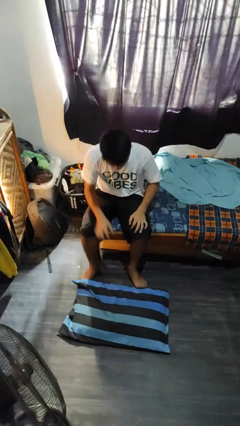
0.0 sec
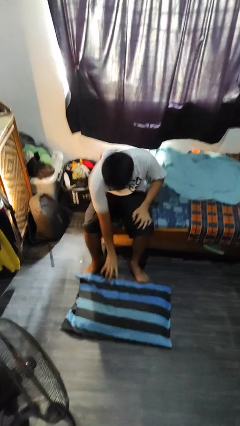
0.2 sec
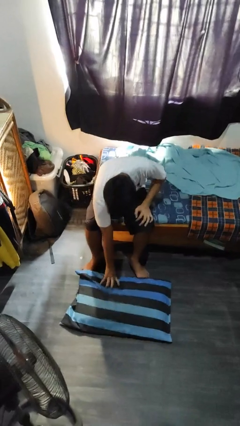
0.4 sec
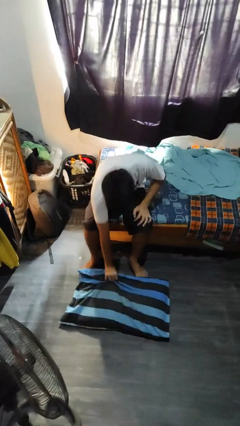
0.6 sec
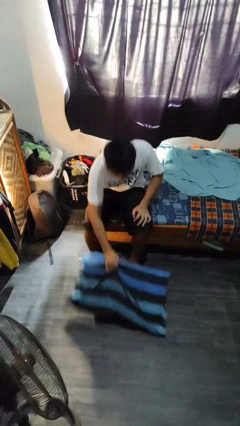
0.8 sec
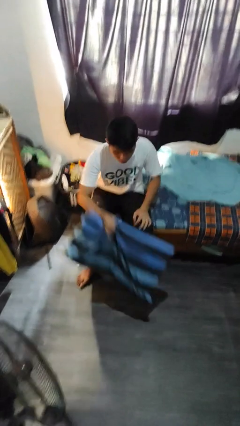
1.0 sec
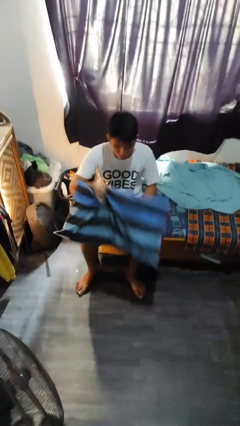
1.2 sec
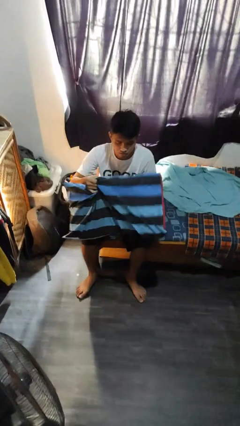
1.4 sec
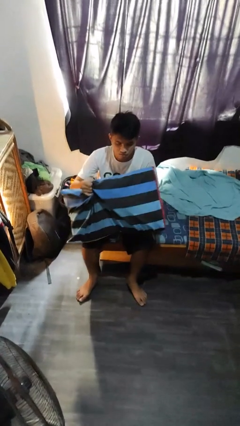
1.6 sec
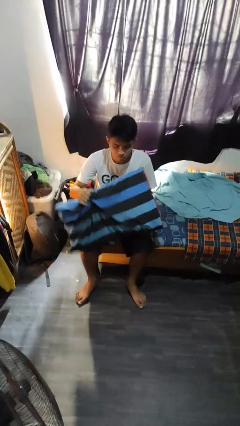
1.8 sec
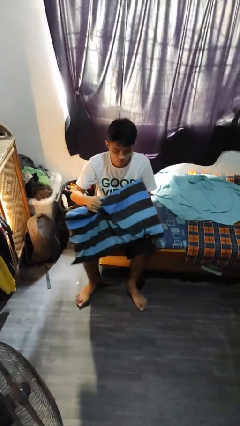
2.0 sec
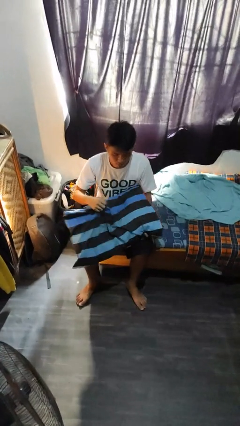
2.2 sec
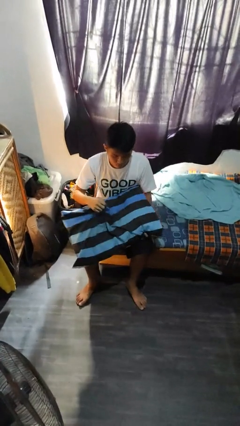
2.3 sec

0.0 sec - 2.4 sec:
person picks up object from floor

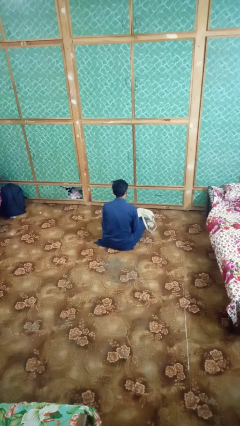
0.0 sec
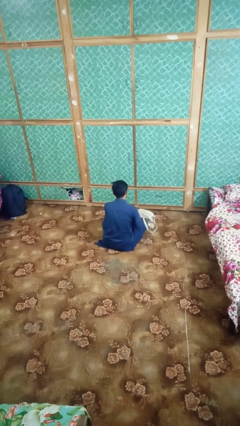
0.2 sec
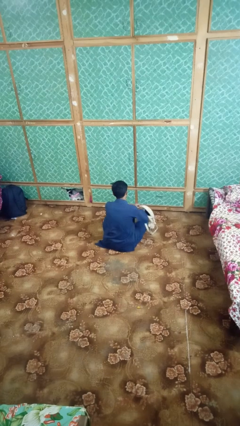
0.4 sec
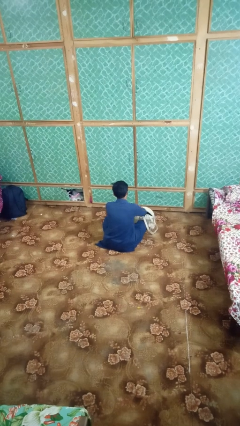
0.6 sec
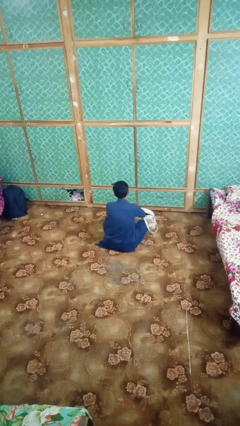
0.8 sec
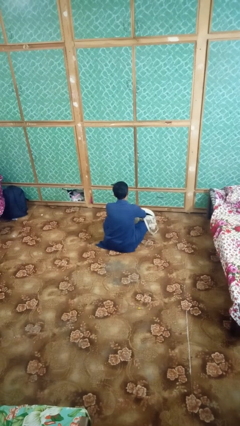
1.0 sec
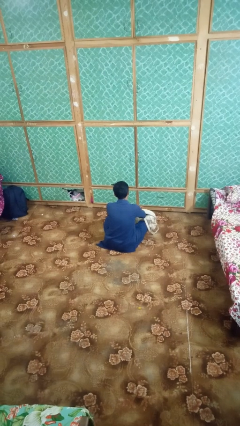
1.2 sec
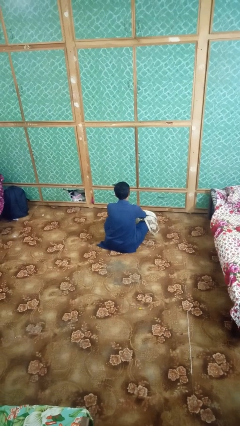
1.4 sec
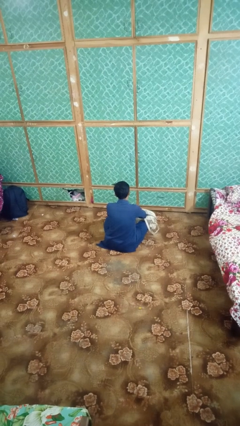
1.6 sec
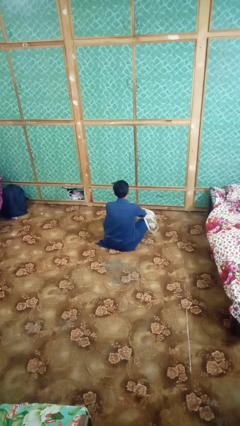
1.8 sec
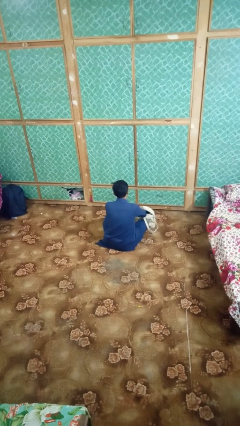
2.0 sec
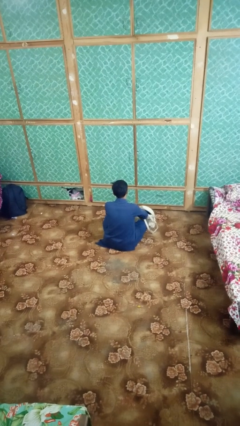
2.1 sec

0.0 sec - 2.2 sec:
person searches in bag

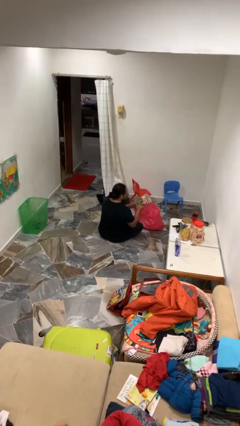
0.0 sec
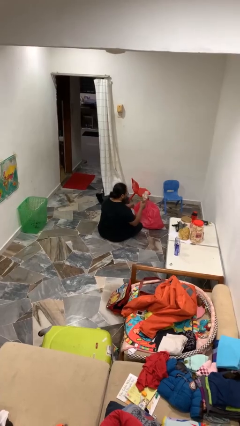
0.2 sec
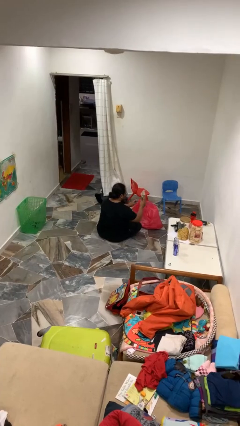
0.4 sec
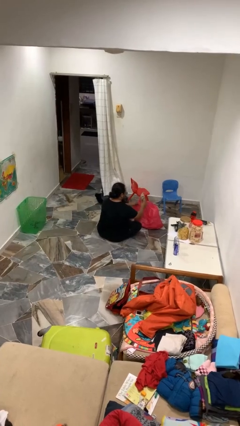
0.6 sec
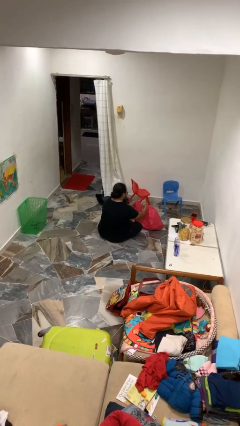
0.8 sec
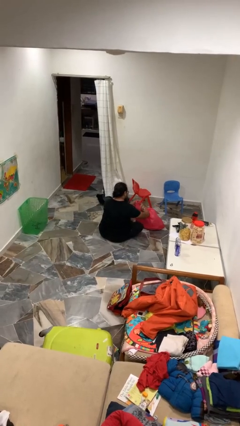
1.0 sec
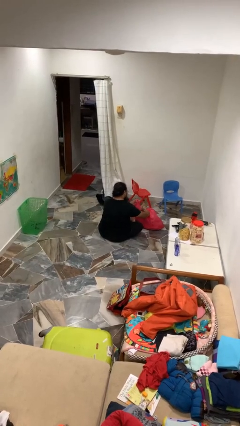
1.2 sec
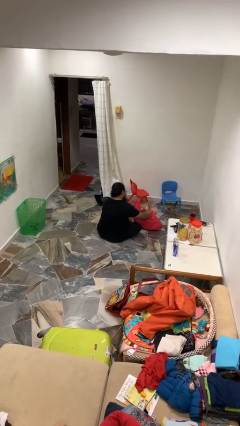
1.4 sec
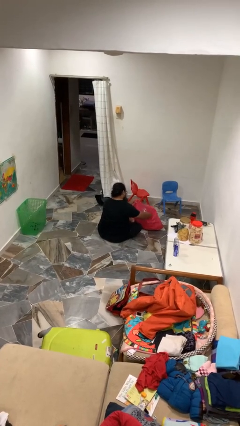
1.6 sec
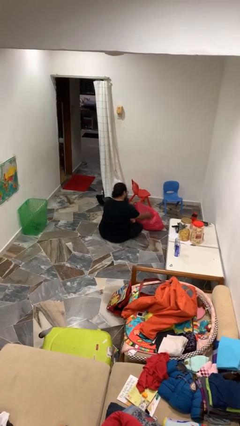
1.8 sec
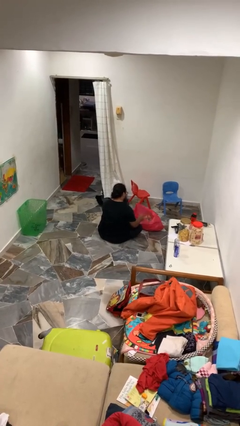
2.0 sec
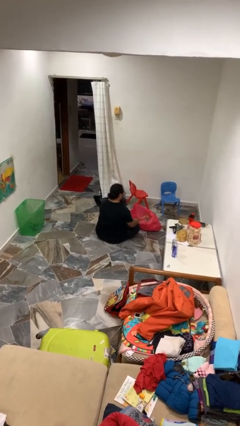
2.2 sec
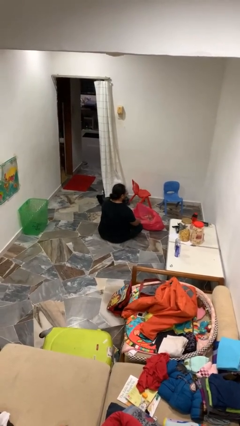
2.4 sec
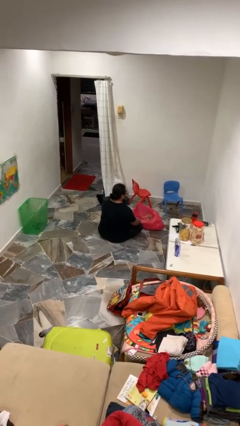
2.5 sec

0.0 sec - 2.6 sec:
person puts object into bag

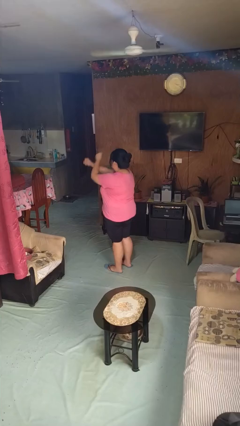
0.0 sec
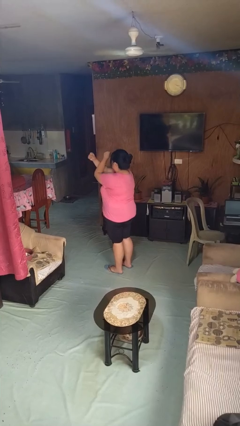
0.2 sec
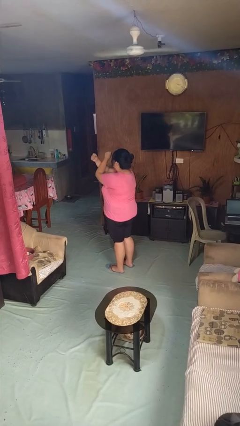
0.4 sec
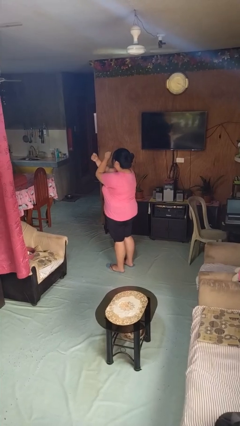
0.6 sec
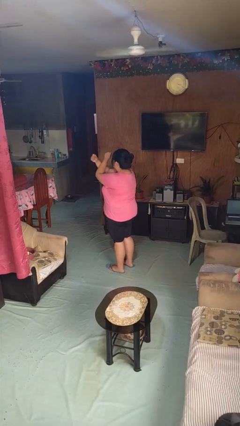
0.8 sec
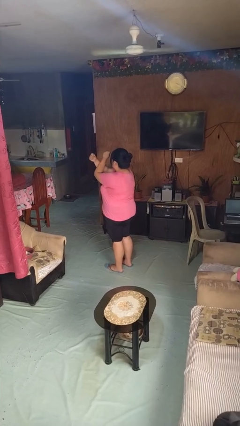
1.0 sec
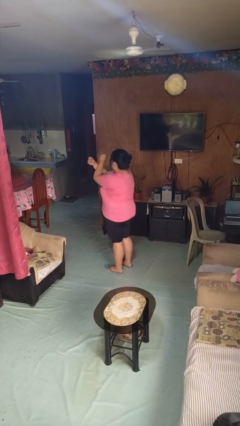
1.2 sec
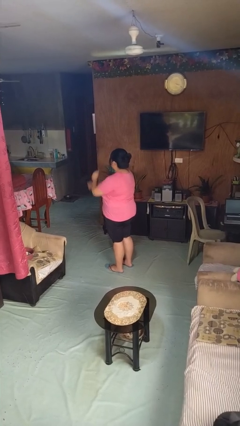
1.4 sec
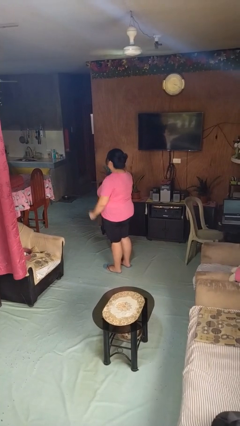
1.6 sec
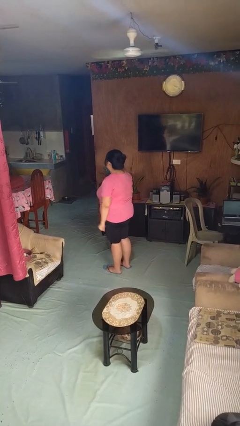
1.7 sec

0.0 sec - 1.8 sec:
person gestures arms x

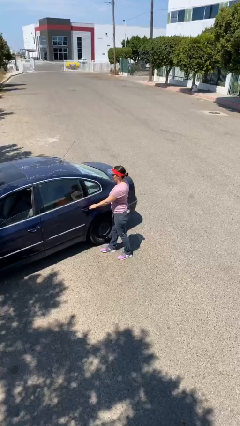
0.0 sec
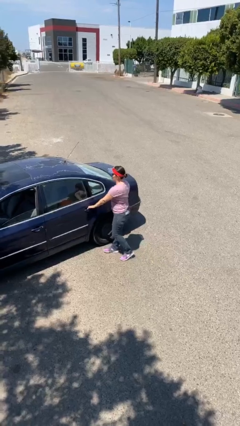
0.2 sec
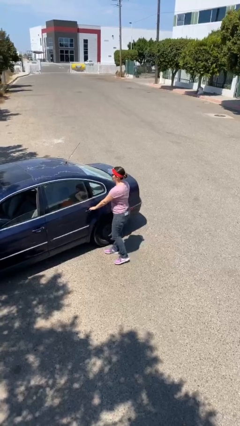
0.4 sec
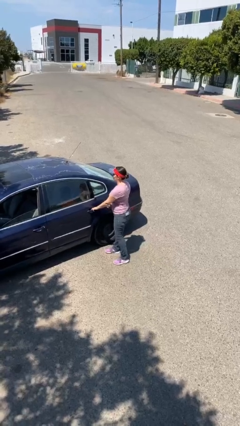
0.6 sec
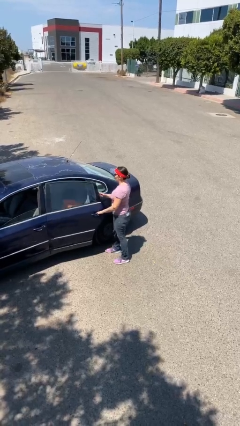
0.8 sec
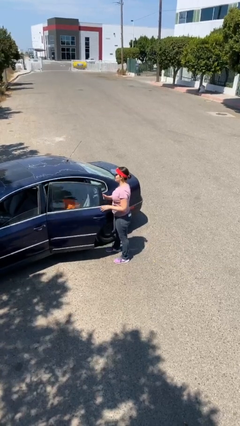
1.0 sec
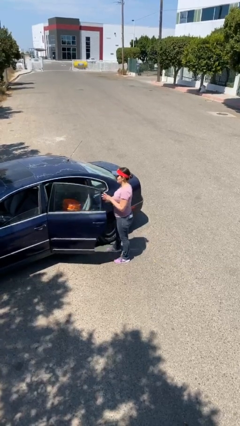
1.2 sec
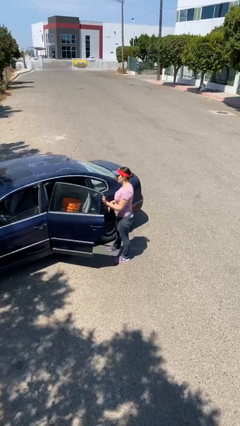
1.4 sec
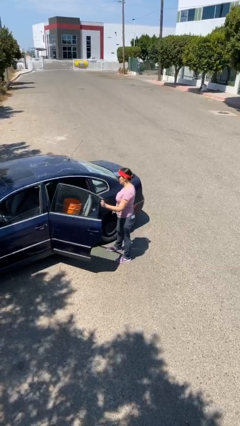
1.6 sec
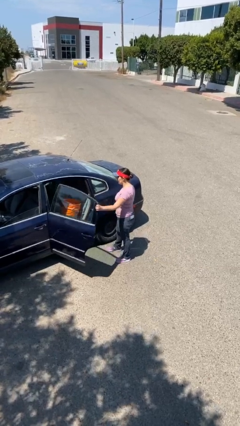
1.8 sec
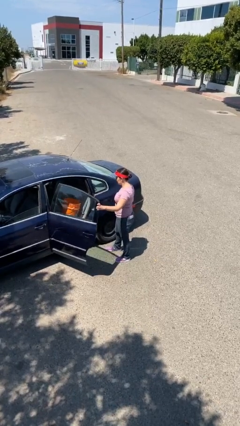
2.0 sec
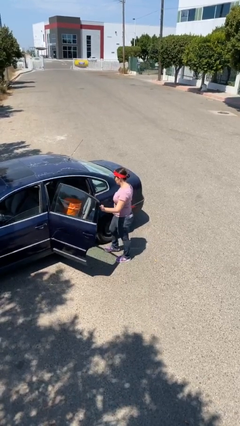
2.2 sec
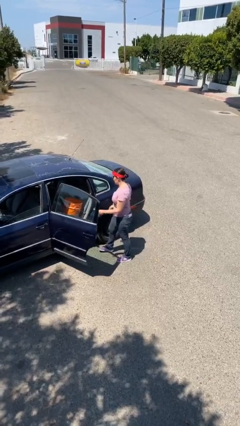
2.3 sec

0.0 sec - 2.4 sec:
person opens car door

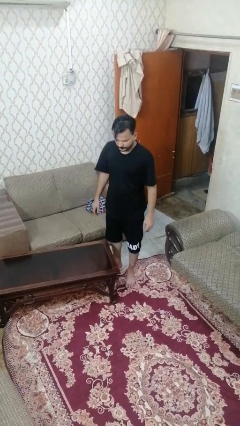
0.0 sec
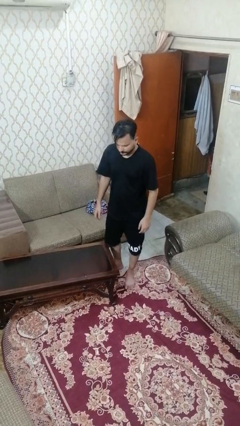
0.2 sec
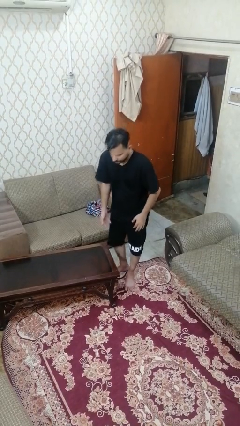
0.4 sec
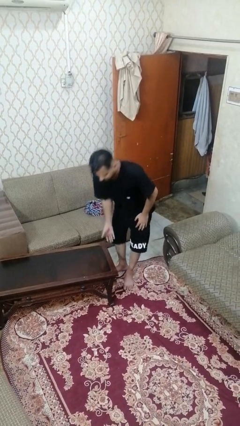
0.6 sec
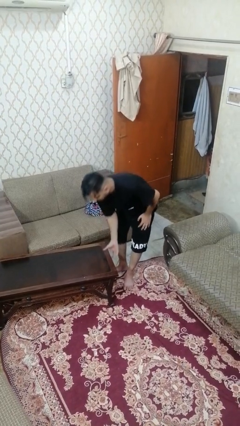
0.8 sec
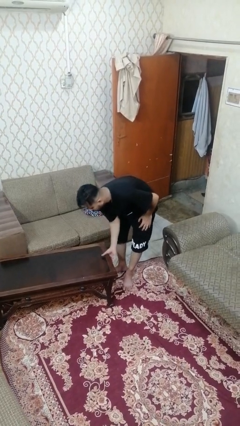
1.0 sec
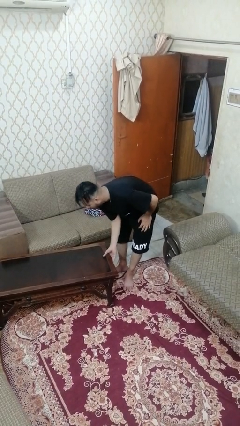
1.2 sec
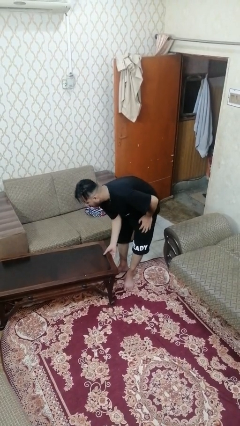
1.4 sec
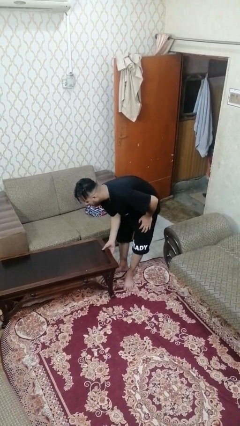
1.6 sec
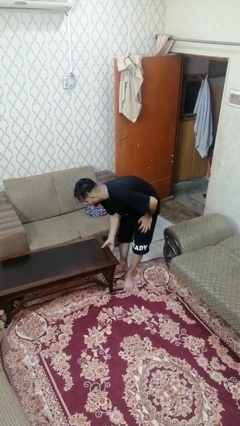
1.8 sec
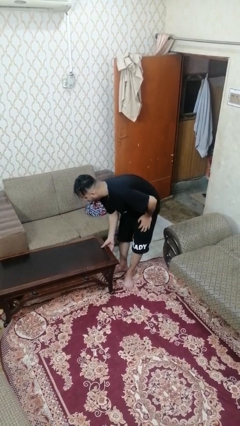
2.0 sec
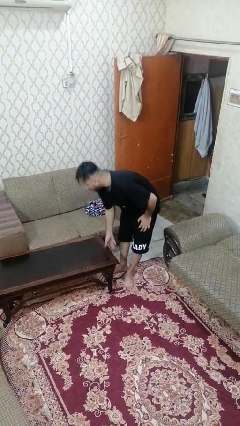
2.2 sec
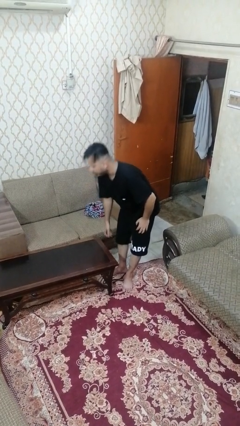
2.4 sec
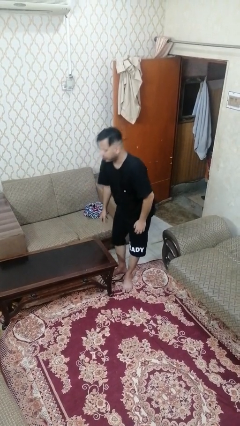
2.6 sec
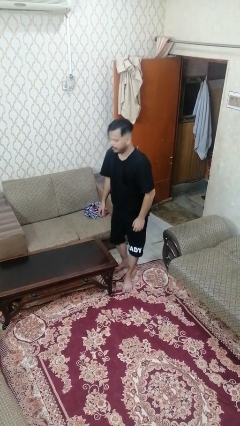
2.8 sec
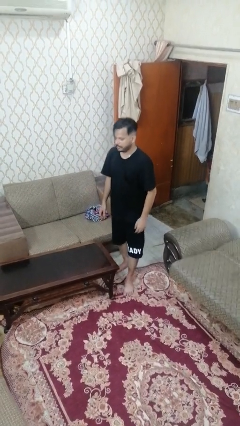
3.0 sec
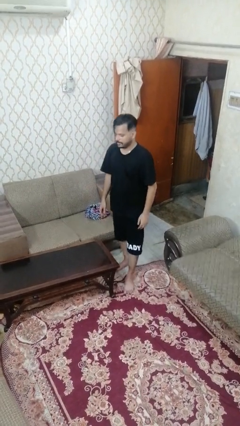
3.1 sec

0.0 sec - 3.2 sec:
person sets upright furniture

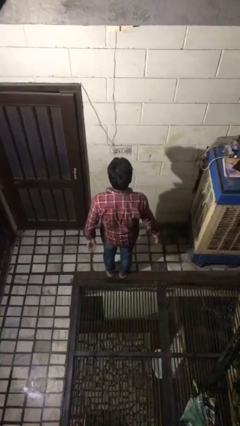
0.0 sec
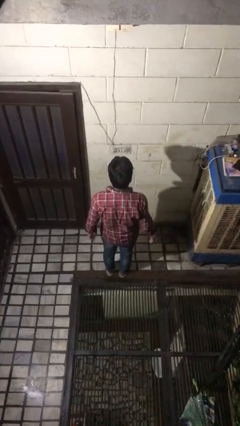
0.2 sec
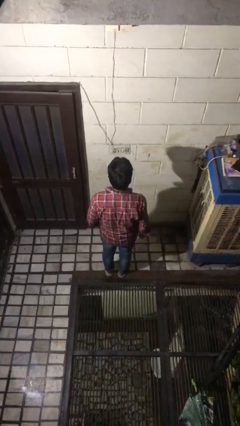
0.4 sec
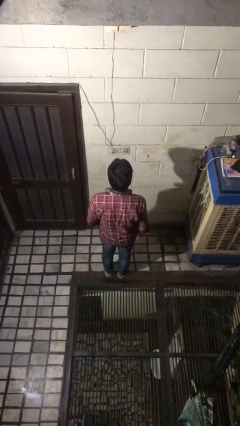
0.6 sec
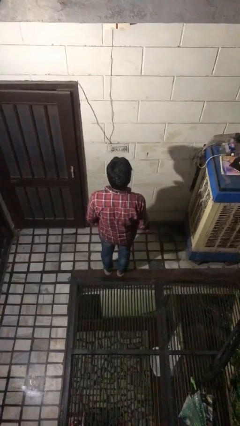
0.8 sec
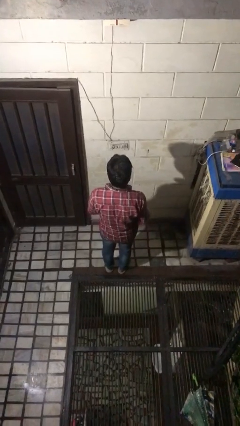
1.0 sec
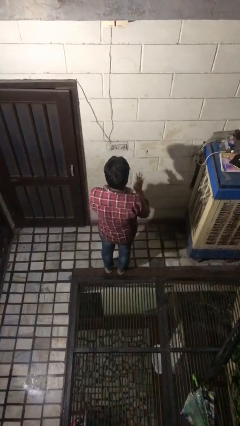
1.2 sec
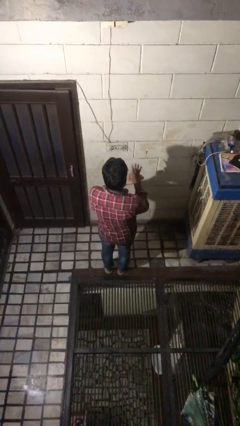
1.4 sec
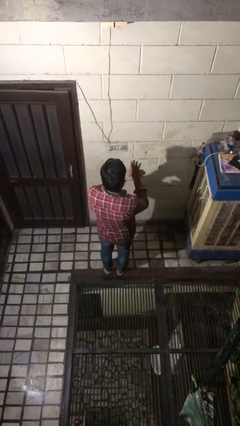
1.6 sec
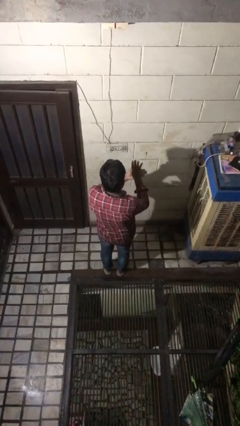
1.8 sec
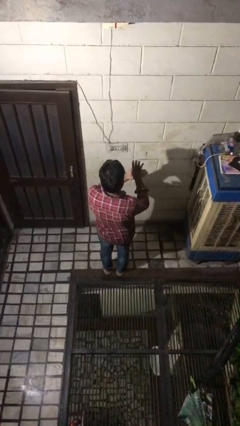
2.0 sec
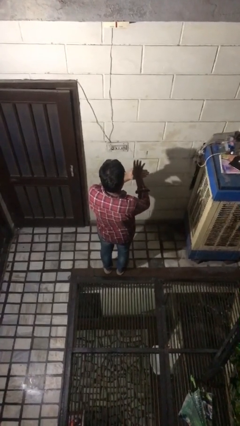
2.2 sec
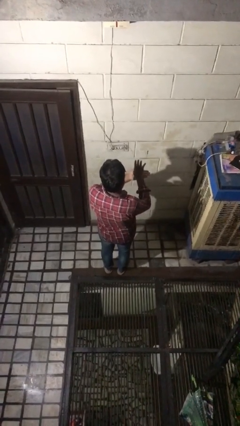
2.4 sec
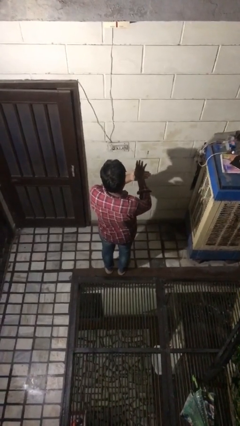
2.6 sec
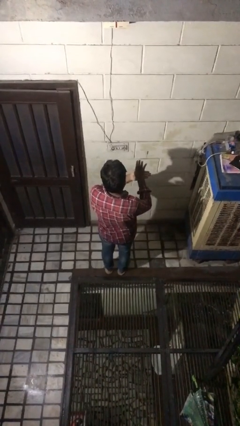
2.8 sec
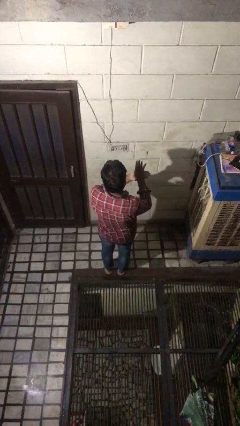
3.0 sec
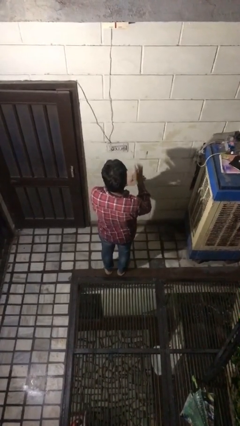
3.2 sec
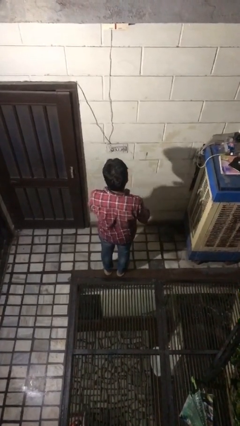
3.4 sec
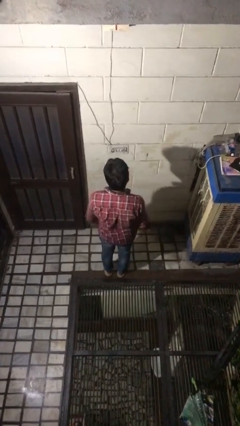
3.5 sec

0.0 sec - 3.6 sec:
person gestures number four
